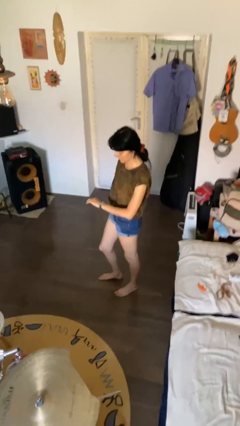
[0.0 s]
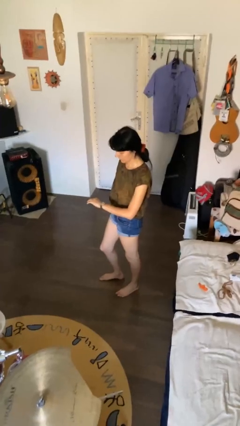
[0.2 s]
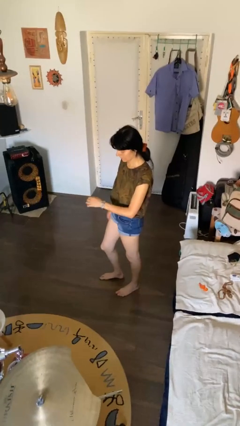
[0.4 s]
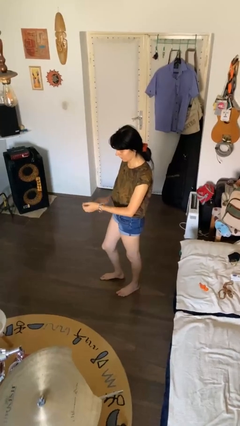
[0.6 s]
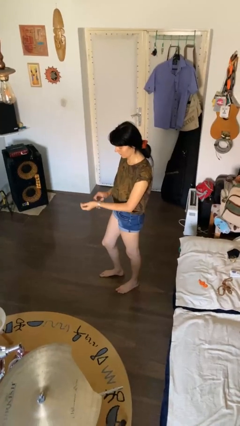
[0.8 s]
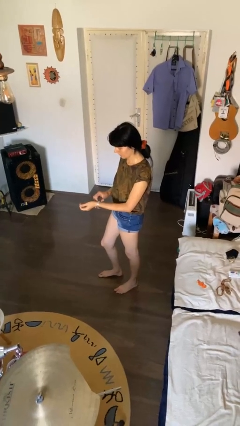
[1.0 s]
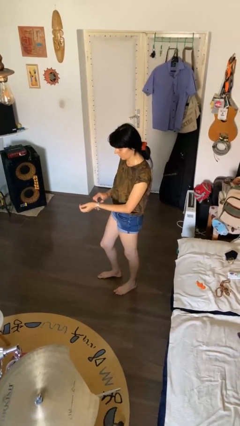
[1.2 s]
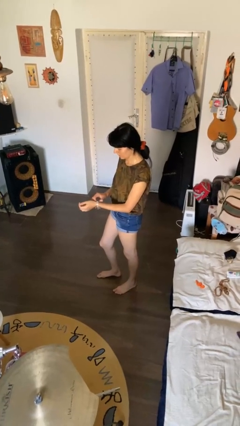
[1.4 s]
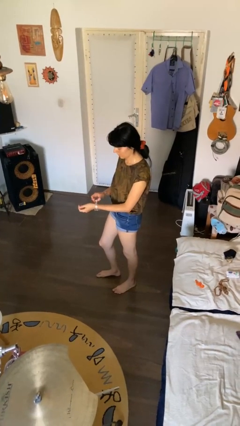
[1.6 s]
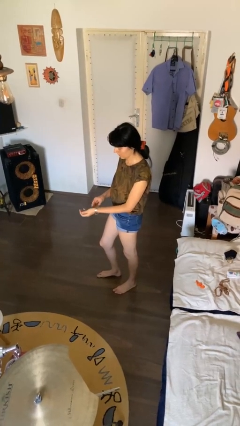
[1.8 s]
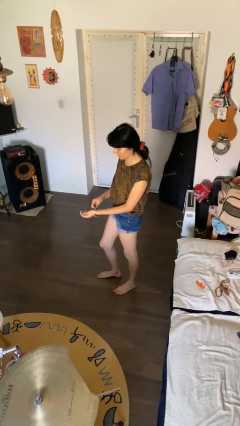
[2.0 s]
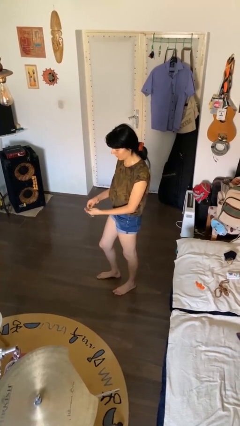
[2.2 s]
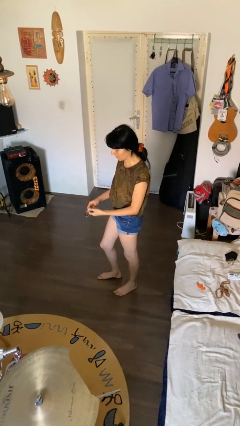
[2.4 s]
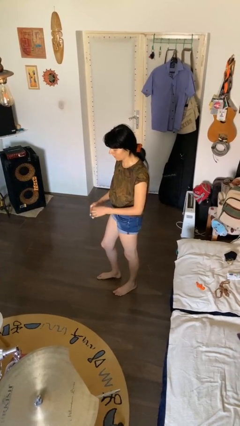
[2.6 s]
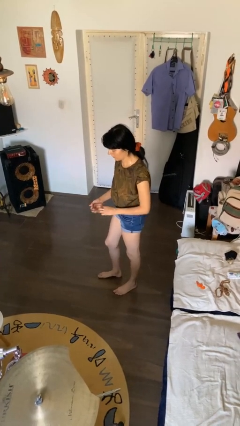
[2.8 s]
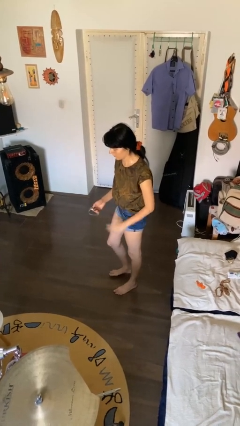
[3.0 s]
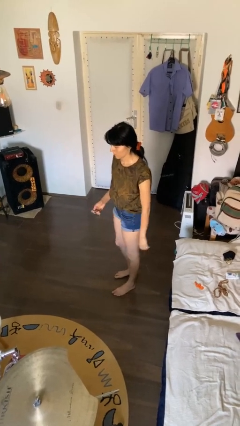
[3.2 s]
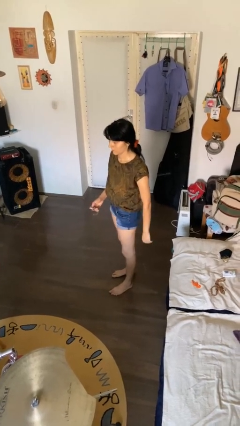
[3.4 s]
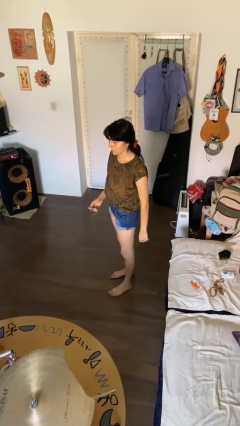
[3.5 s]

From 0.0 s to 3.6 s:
person takes off wristwatch

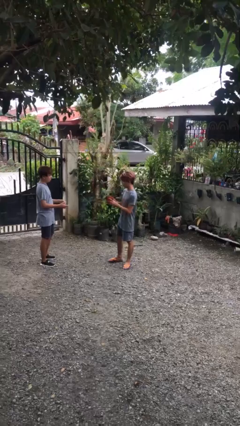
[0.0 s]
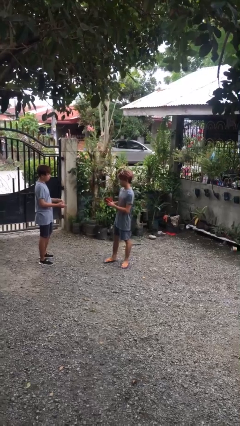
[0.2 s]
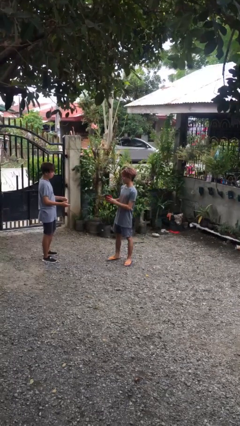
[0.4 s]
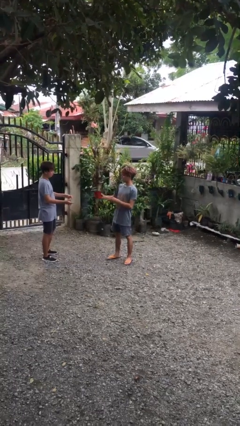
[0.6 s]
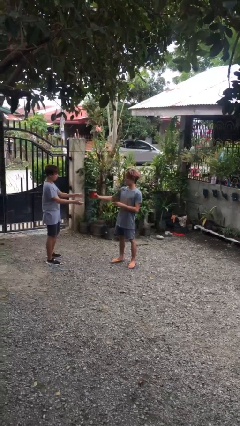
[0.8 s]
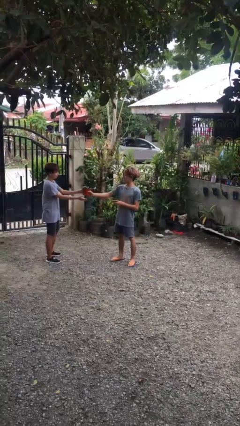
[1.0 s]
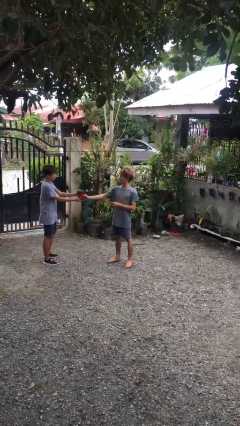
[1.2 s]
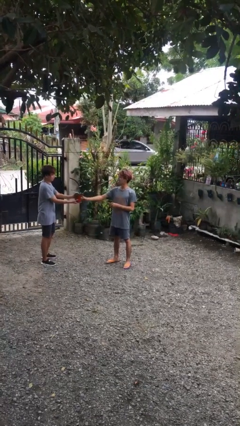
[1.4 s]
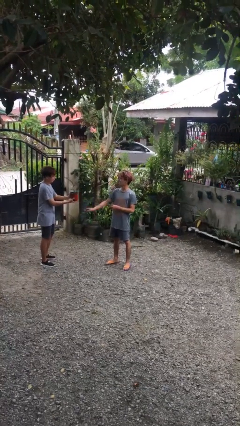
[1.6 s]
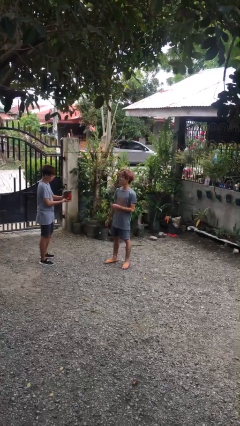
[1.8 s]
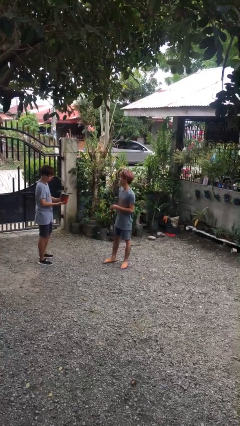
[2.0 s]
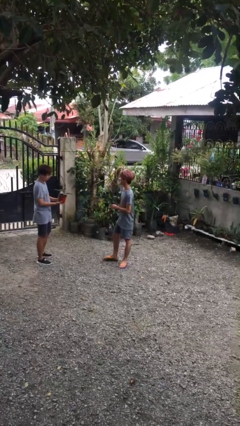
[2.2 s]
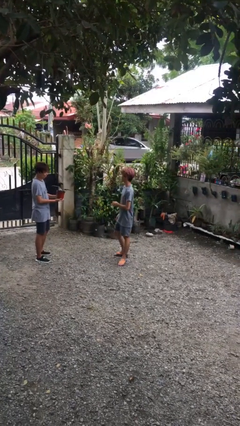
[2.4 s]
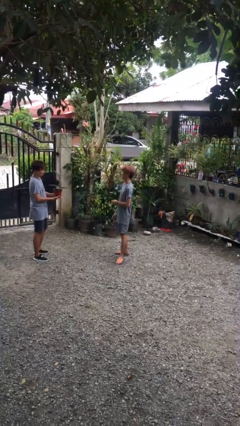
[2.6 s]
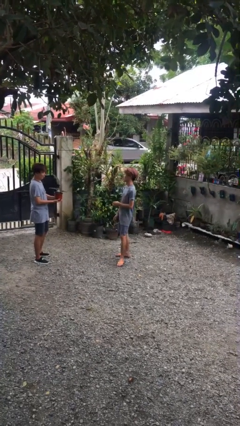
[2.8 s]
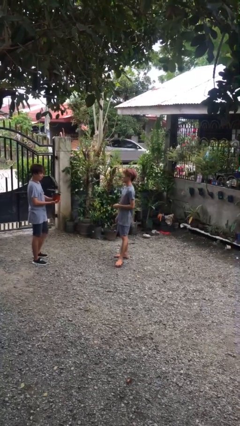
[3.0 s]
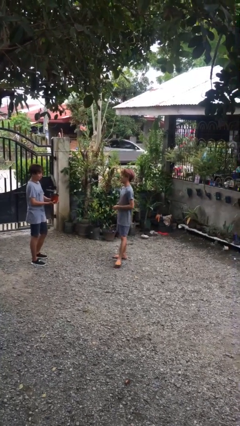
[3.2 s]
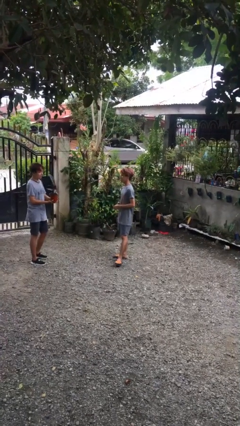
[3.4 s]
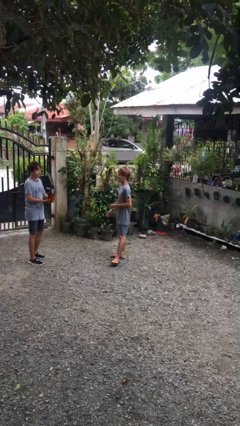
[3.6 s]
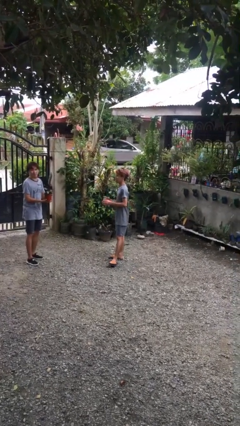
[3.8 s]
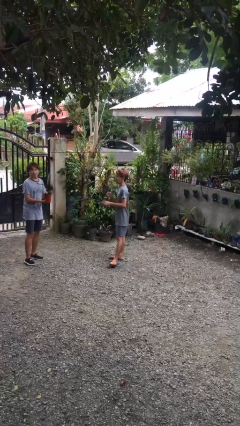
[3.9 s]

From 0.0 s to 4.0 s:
person transfers object to person

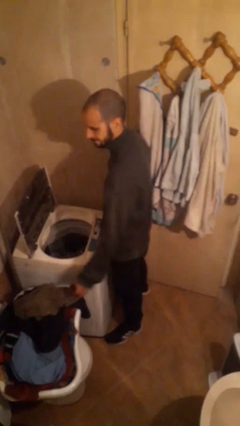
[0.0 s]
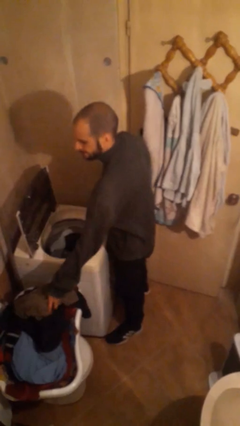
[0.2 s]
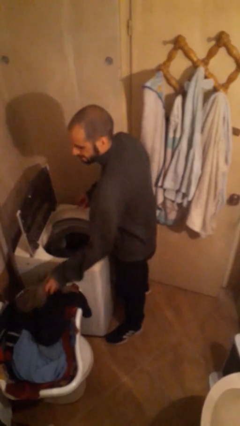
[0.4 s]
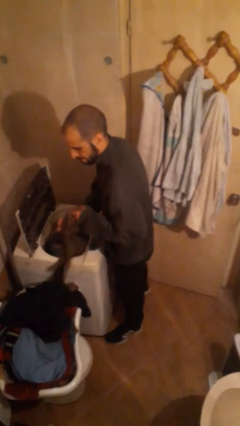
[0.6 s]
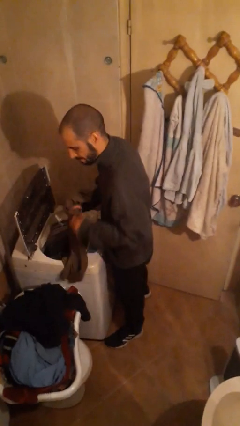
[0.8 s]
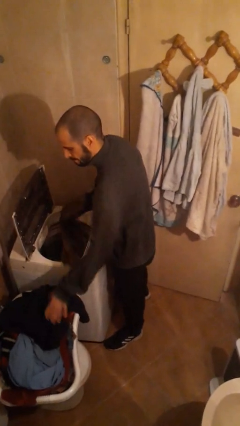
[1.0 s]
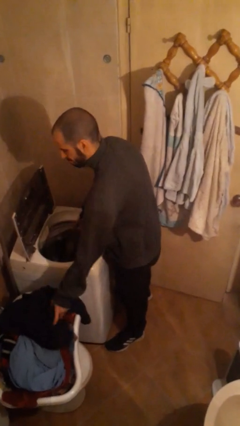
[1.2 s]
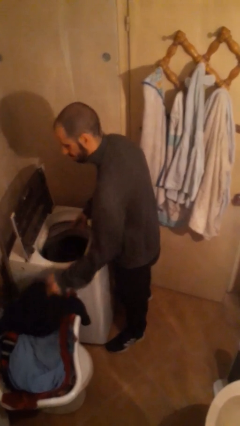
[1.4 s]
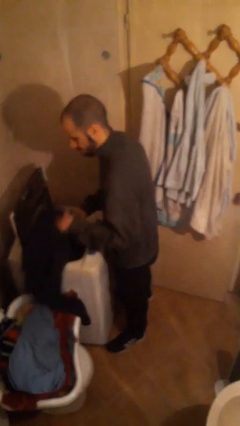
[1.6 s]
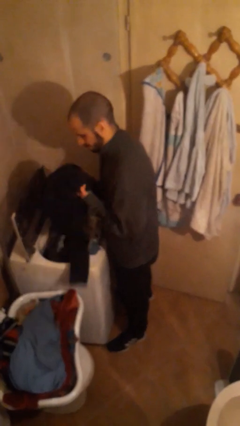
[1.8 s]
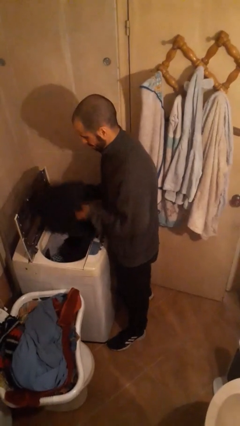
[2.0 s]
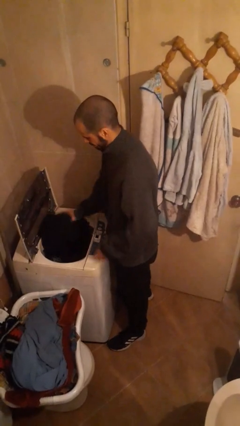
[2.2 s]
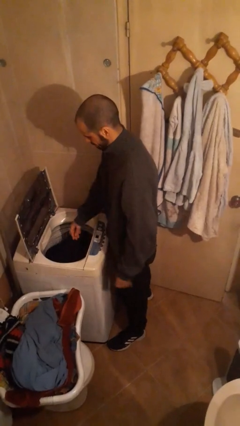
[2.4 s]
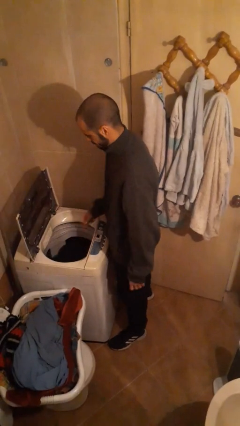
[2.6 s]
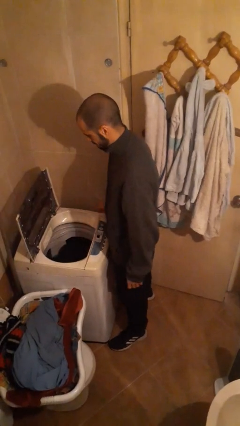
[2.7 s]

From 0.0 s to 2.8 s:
person loads clotheswasher

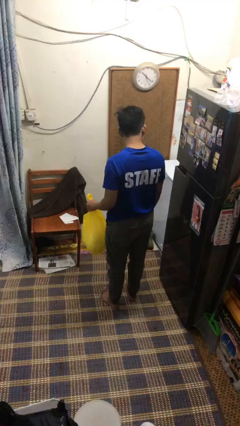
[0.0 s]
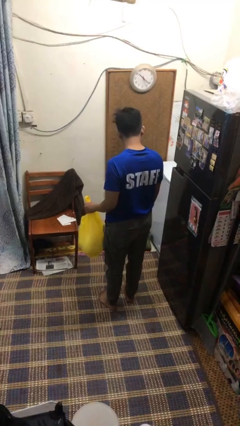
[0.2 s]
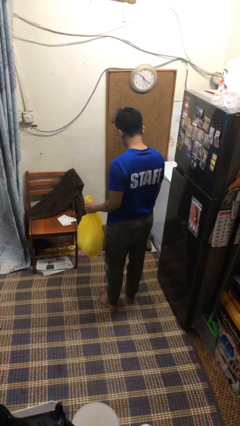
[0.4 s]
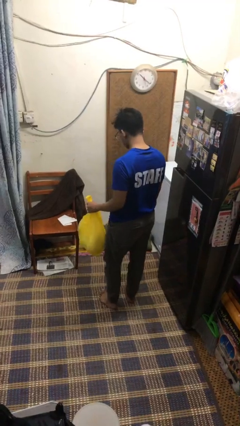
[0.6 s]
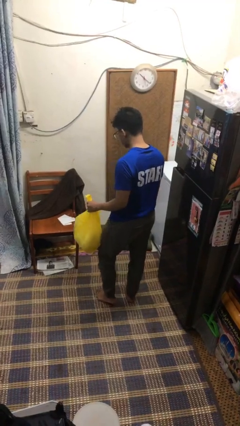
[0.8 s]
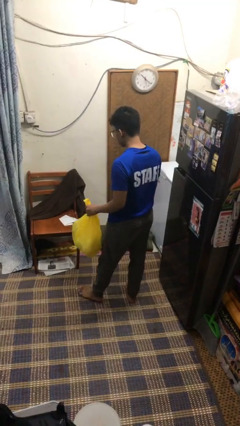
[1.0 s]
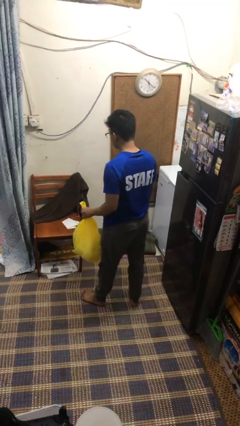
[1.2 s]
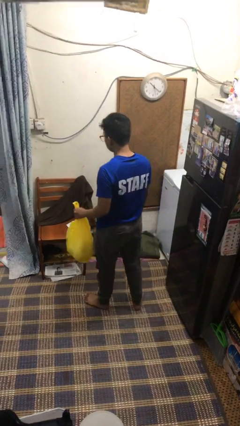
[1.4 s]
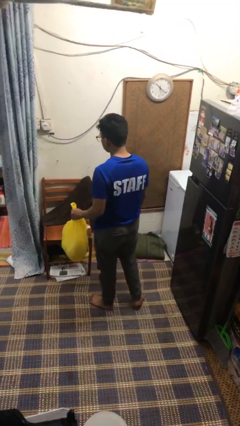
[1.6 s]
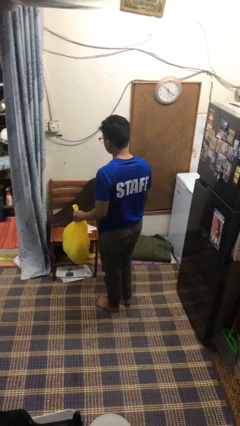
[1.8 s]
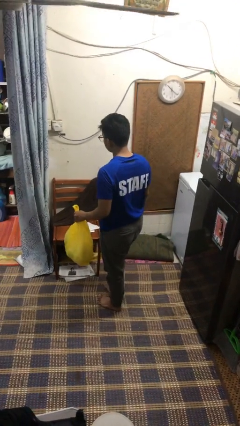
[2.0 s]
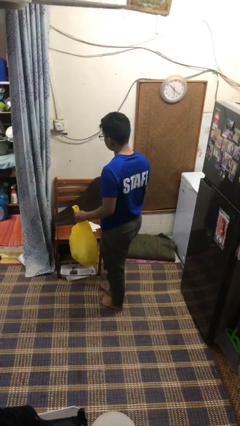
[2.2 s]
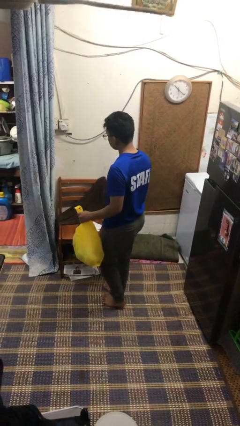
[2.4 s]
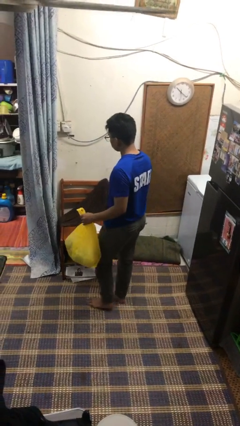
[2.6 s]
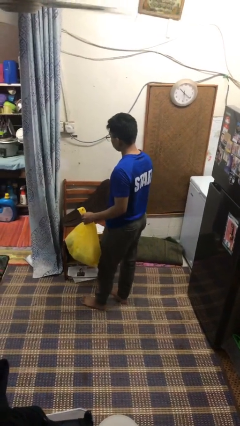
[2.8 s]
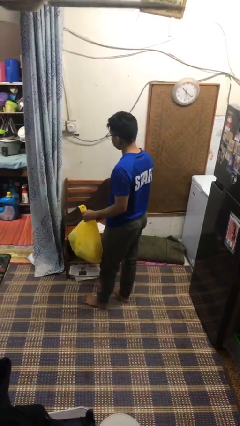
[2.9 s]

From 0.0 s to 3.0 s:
person carries groceries

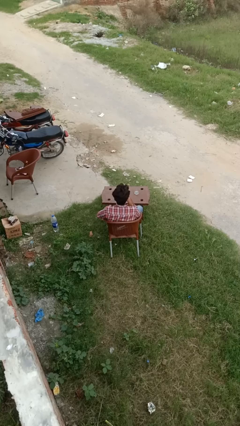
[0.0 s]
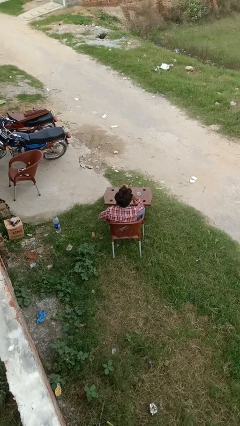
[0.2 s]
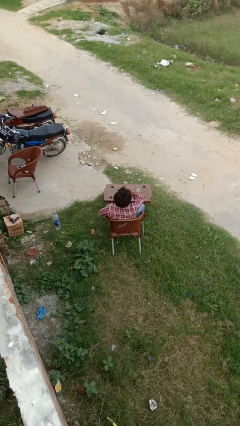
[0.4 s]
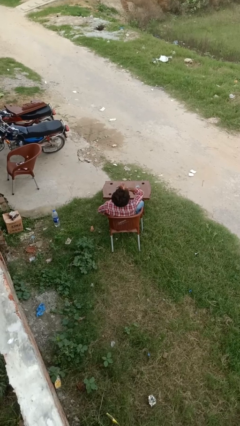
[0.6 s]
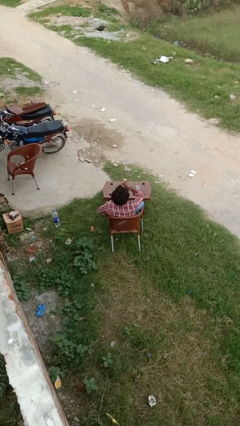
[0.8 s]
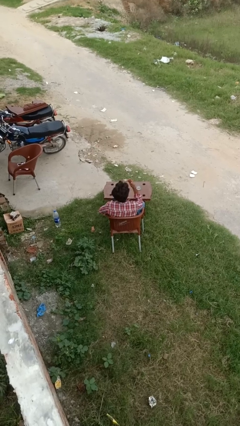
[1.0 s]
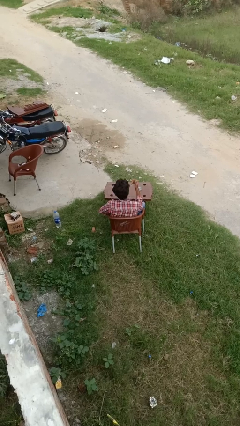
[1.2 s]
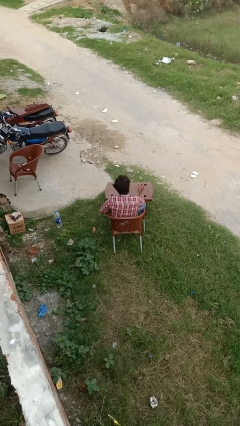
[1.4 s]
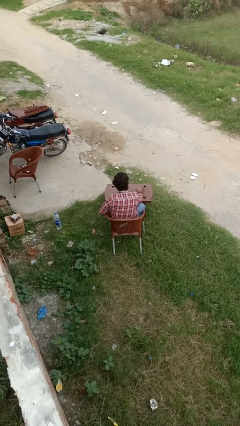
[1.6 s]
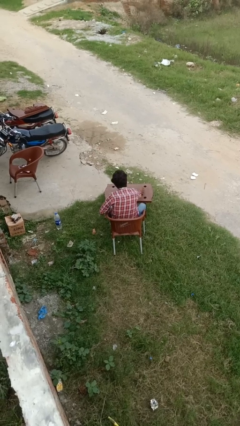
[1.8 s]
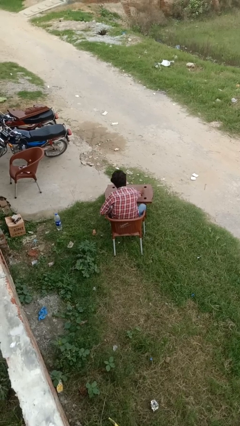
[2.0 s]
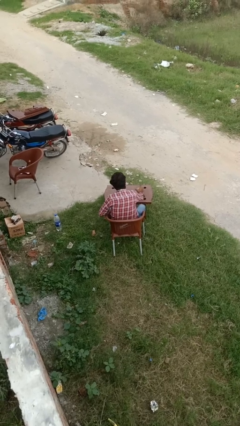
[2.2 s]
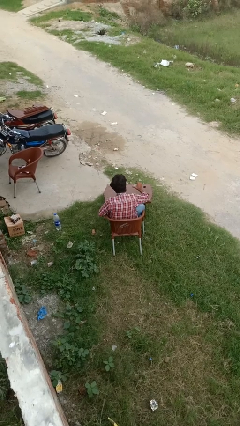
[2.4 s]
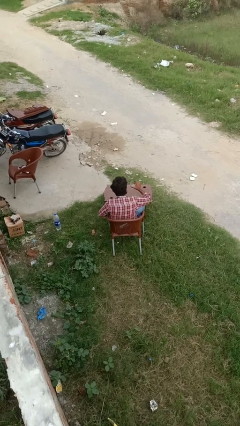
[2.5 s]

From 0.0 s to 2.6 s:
person drinks from cup

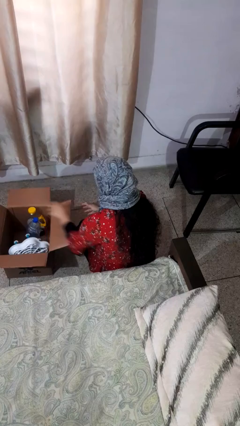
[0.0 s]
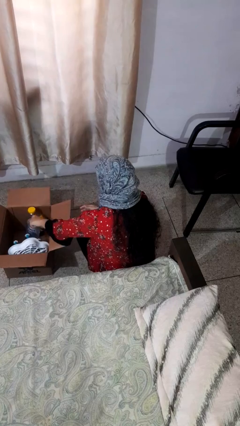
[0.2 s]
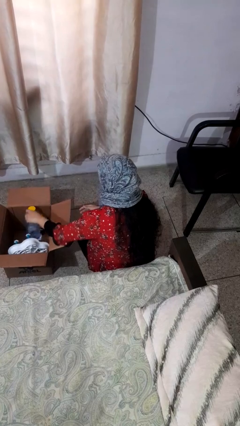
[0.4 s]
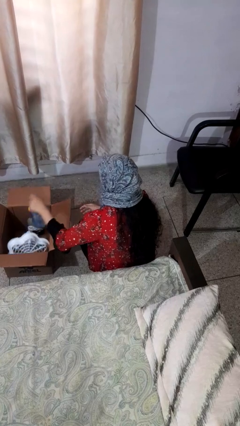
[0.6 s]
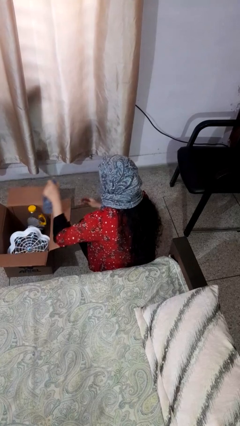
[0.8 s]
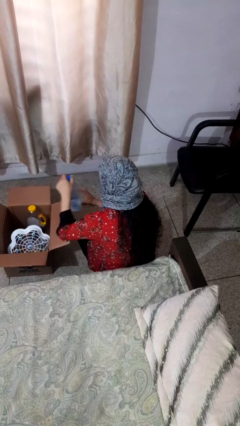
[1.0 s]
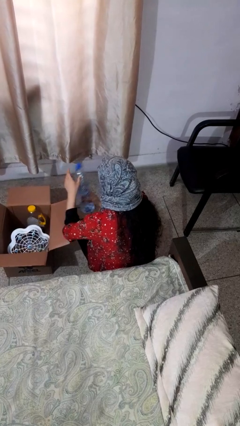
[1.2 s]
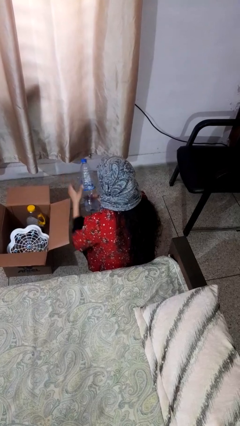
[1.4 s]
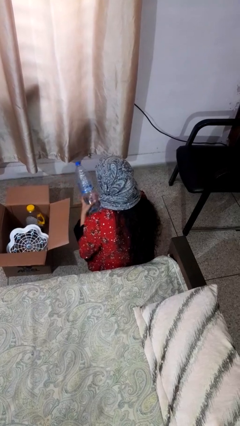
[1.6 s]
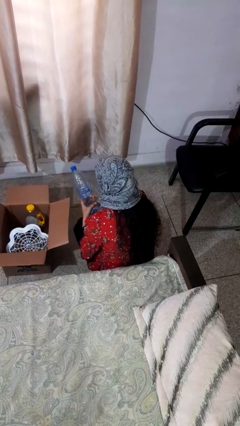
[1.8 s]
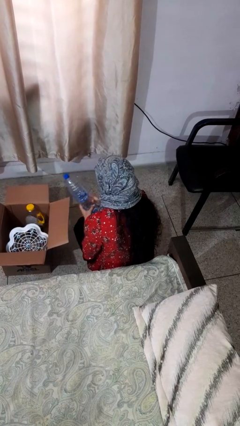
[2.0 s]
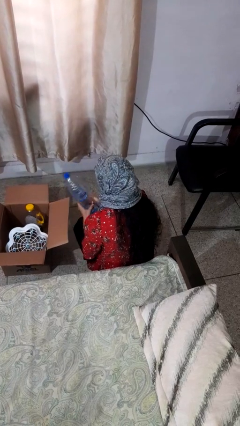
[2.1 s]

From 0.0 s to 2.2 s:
person takes object from box
